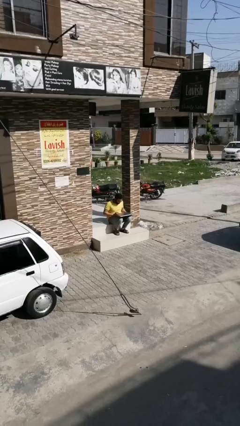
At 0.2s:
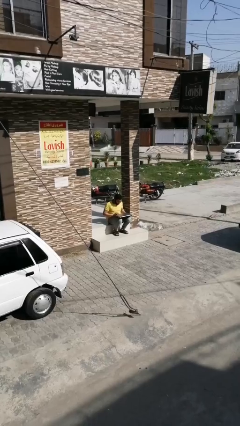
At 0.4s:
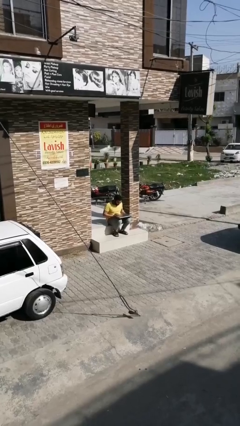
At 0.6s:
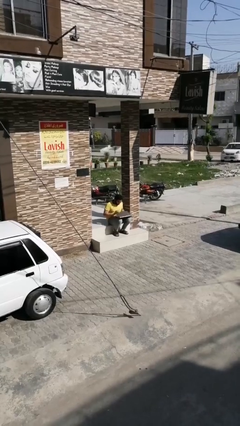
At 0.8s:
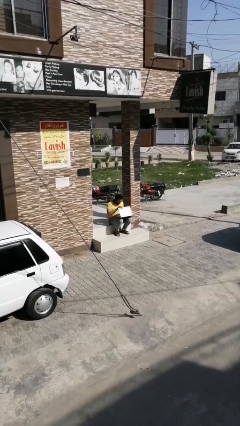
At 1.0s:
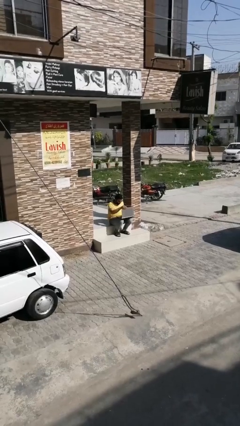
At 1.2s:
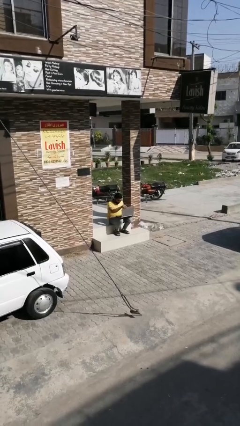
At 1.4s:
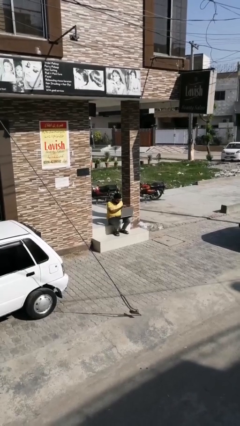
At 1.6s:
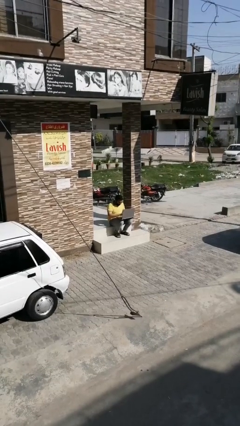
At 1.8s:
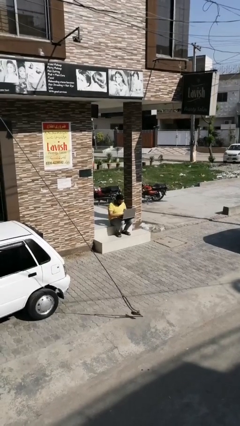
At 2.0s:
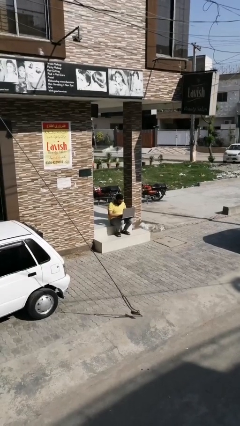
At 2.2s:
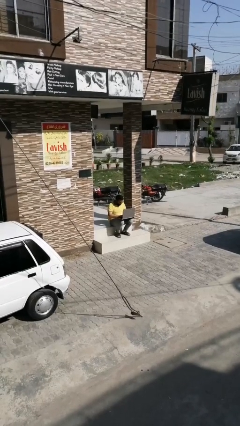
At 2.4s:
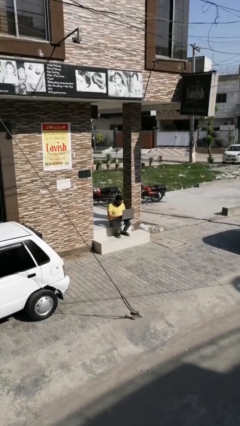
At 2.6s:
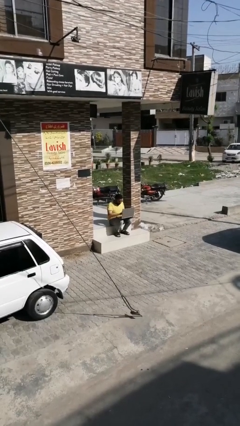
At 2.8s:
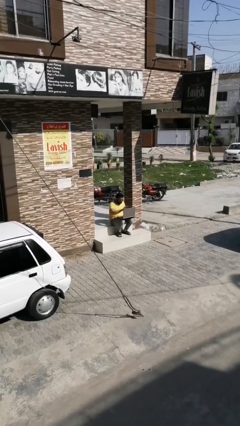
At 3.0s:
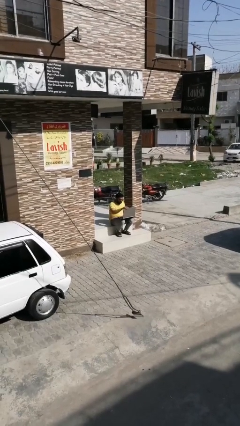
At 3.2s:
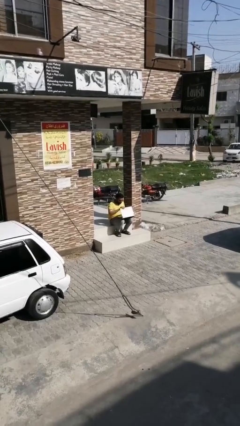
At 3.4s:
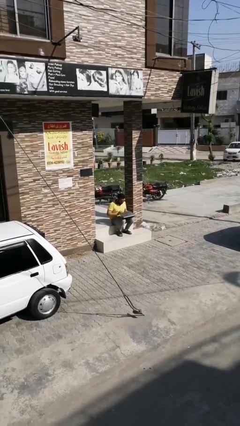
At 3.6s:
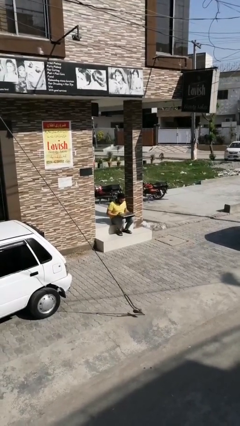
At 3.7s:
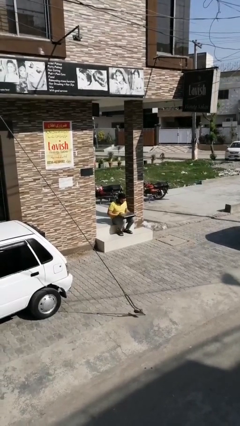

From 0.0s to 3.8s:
person interacts with laptop

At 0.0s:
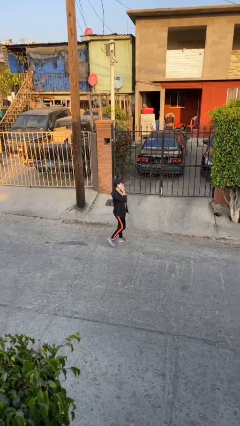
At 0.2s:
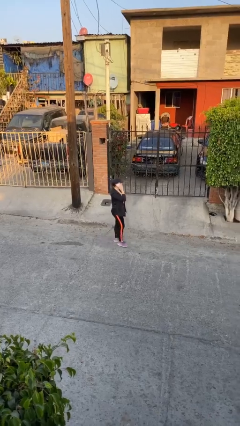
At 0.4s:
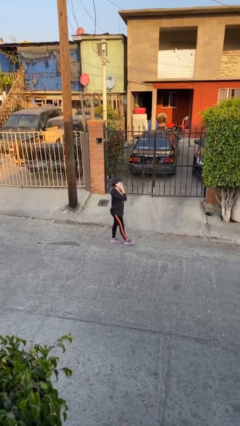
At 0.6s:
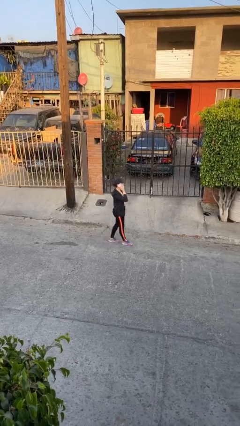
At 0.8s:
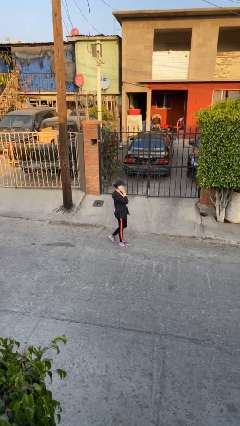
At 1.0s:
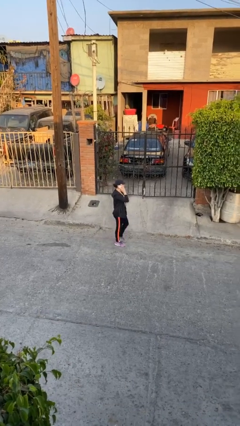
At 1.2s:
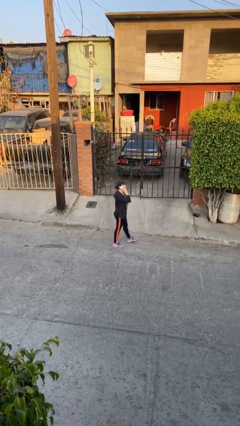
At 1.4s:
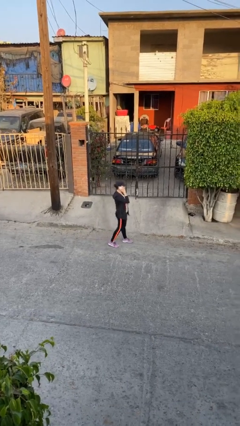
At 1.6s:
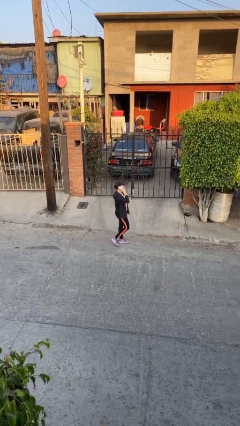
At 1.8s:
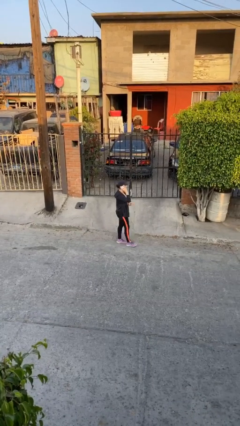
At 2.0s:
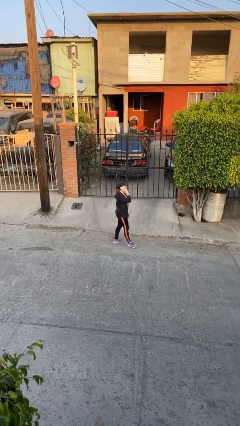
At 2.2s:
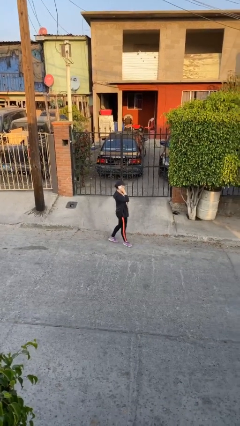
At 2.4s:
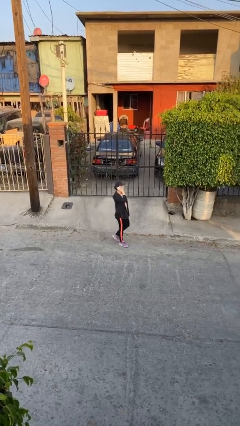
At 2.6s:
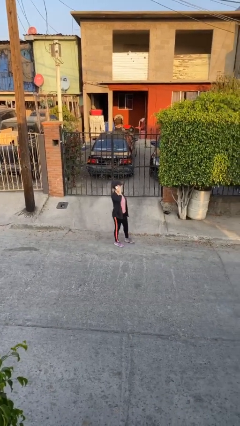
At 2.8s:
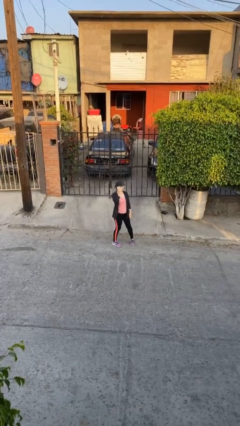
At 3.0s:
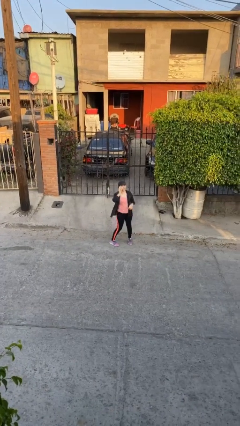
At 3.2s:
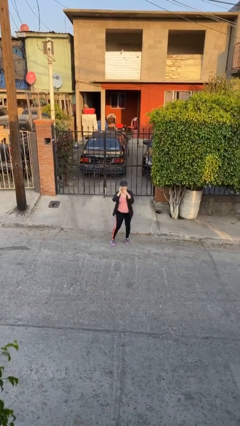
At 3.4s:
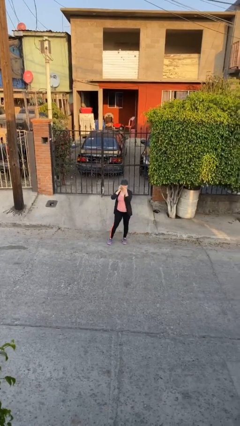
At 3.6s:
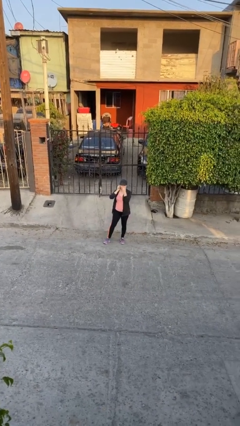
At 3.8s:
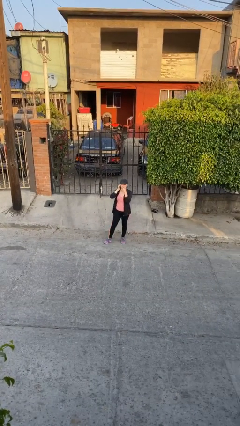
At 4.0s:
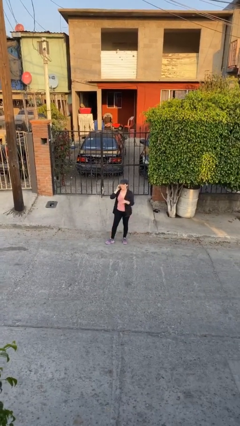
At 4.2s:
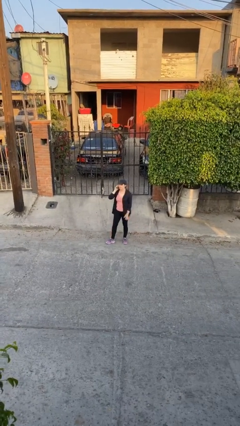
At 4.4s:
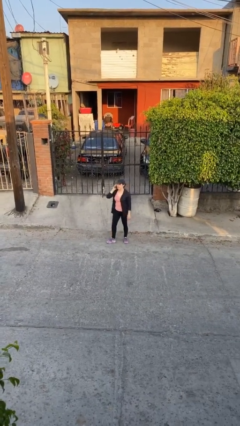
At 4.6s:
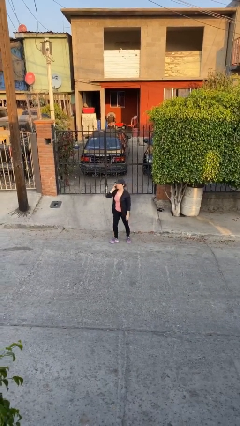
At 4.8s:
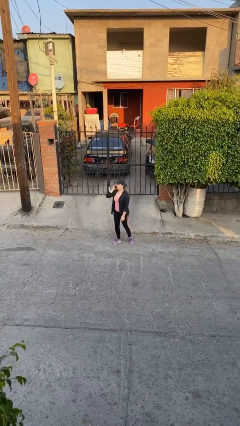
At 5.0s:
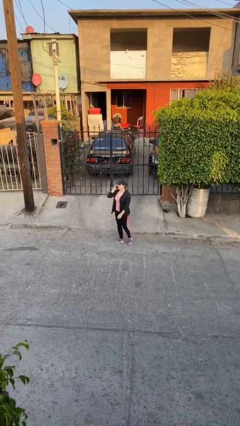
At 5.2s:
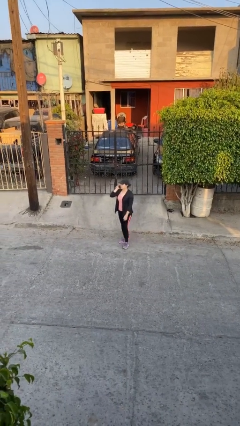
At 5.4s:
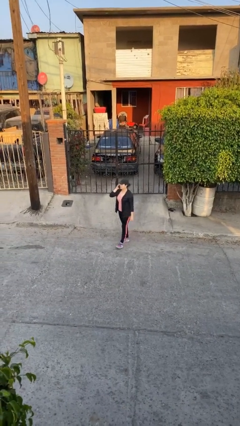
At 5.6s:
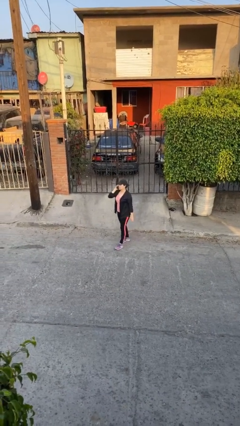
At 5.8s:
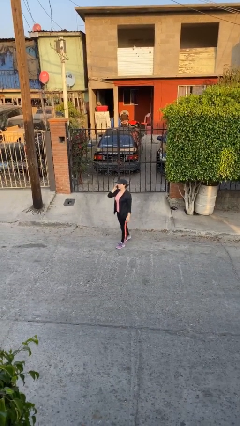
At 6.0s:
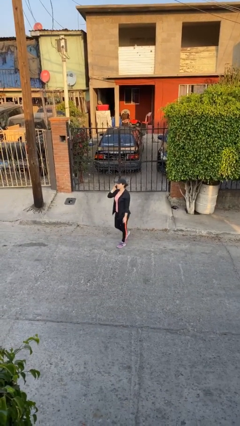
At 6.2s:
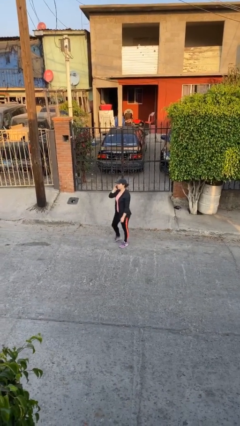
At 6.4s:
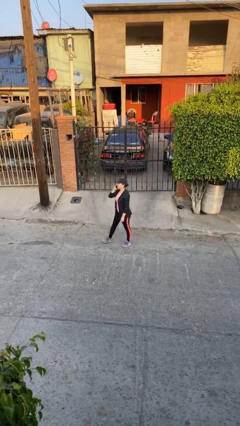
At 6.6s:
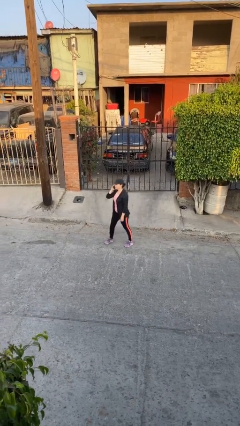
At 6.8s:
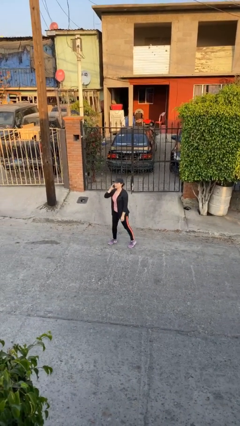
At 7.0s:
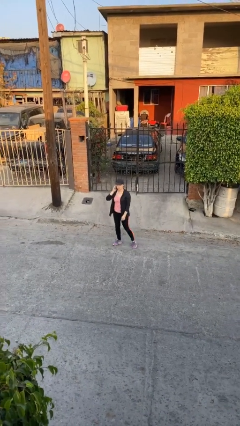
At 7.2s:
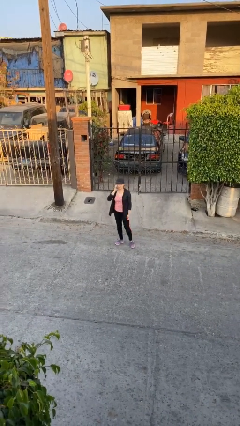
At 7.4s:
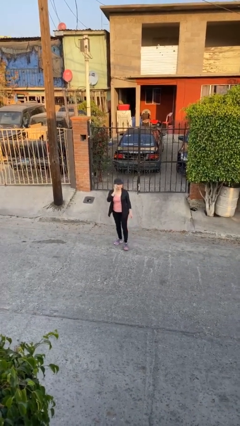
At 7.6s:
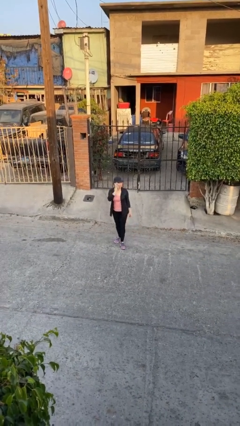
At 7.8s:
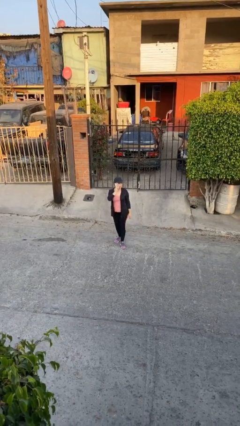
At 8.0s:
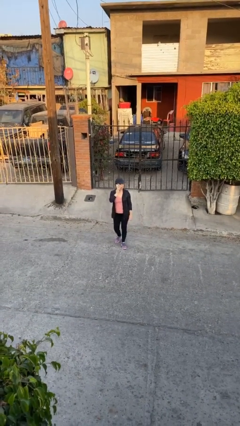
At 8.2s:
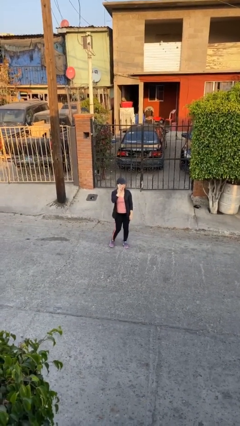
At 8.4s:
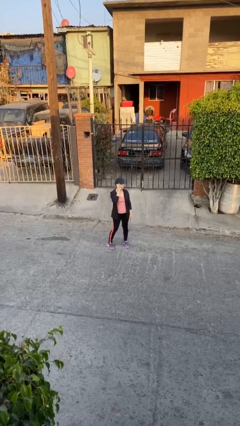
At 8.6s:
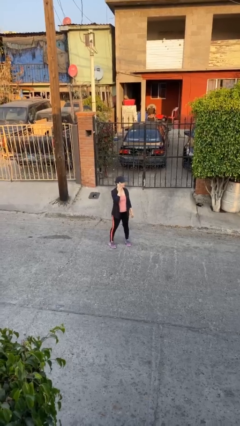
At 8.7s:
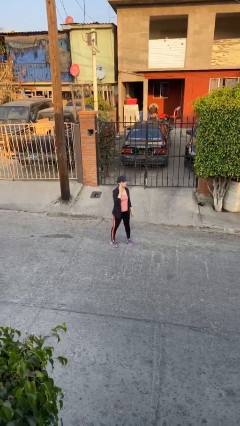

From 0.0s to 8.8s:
person talks on phone

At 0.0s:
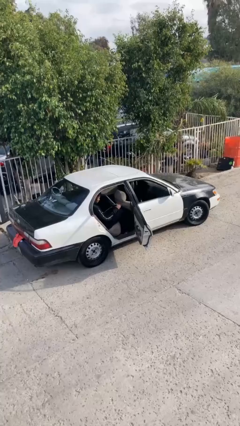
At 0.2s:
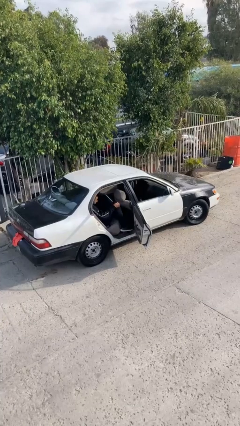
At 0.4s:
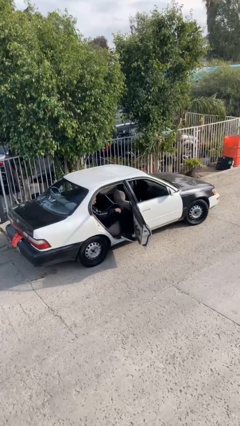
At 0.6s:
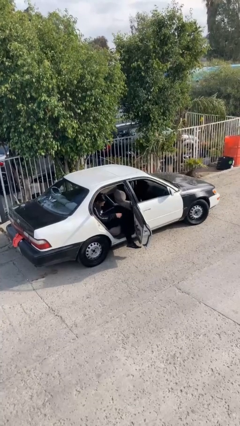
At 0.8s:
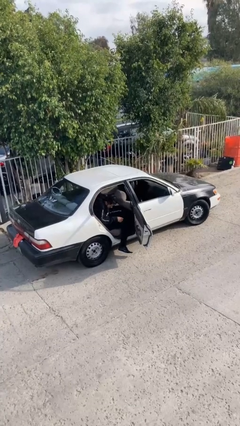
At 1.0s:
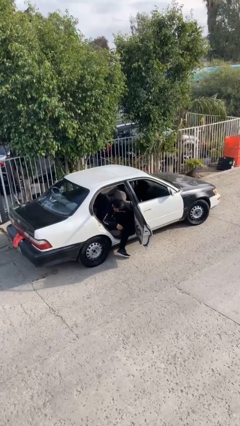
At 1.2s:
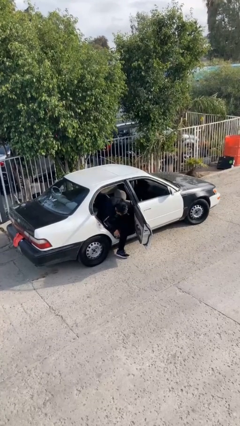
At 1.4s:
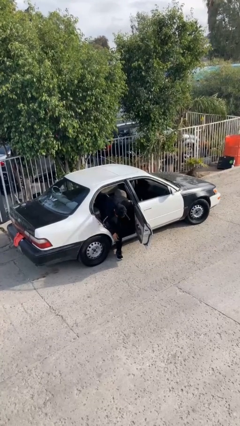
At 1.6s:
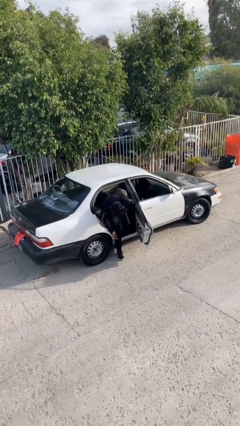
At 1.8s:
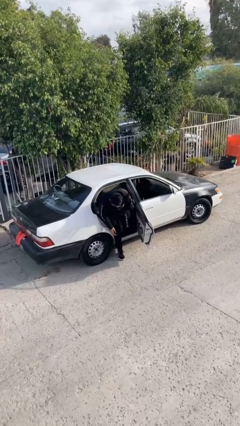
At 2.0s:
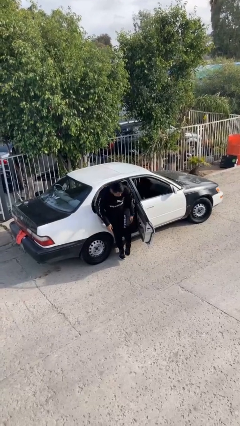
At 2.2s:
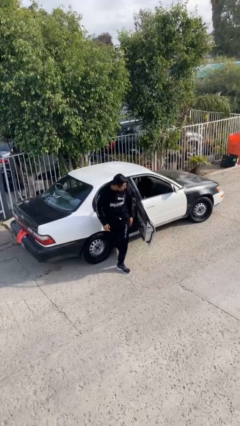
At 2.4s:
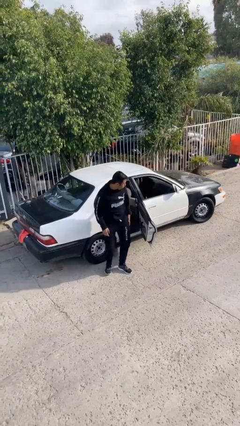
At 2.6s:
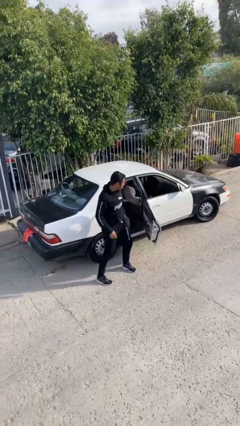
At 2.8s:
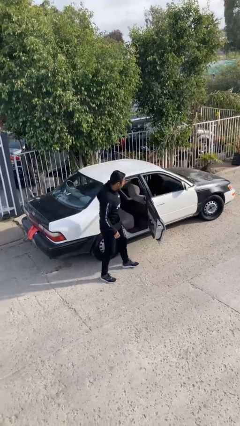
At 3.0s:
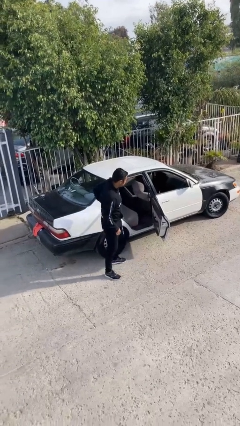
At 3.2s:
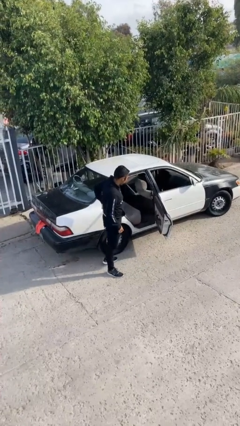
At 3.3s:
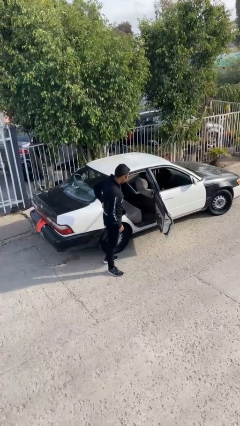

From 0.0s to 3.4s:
person exits car

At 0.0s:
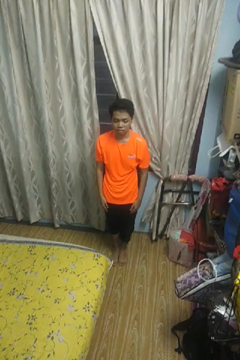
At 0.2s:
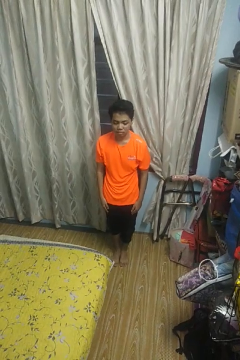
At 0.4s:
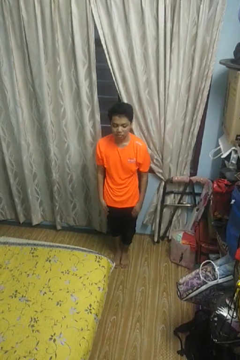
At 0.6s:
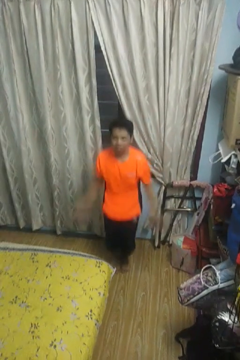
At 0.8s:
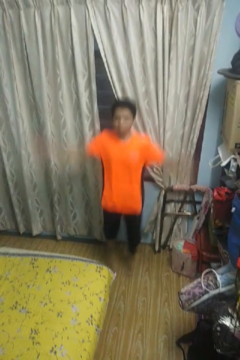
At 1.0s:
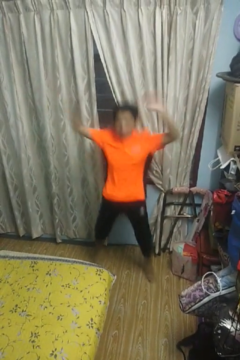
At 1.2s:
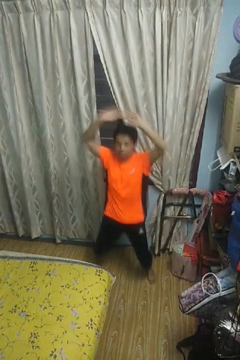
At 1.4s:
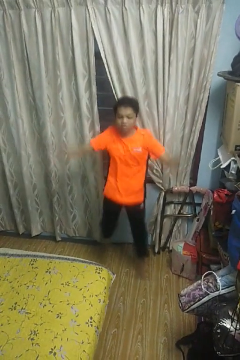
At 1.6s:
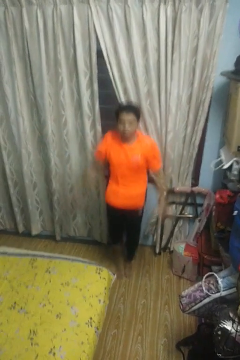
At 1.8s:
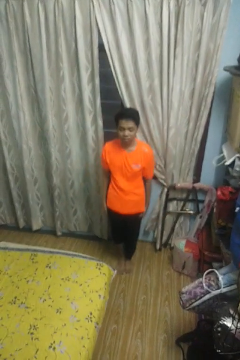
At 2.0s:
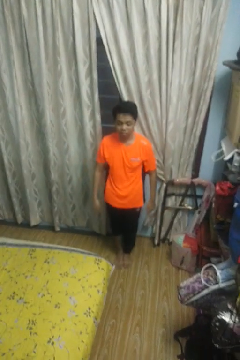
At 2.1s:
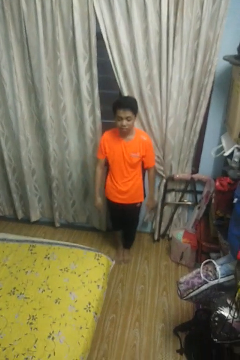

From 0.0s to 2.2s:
person exercises with jumping jacks
